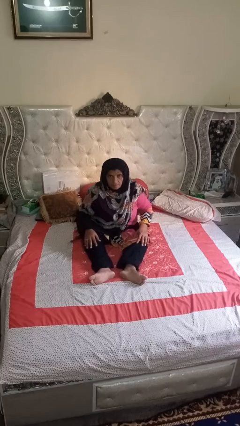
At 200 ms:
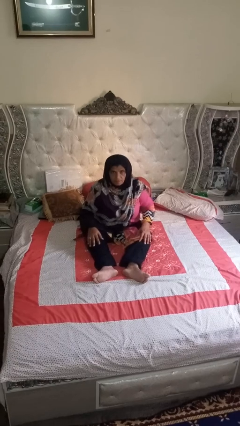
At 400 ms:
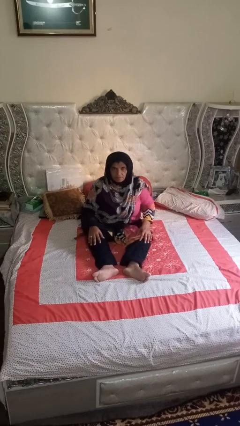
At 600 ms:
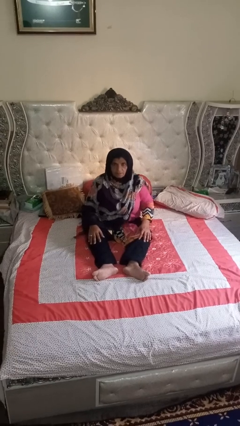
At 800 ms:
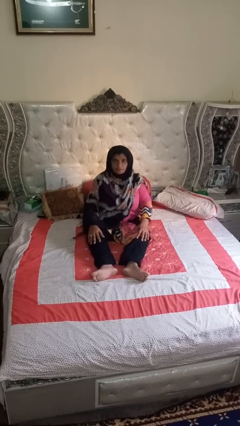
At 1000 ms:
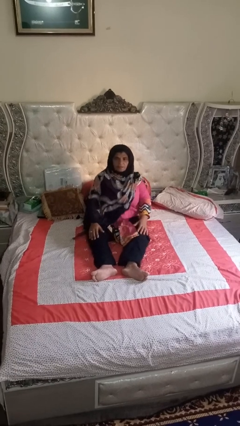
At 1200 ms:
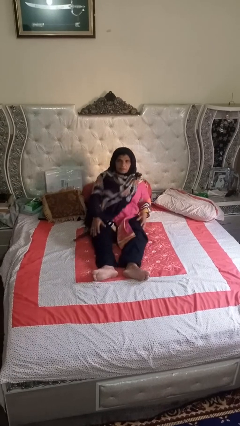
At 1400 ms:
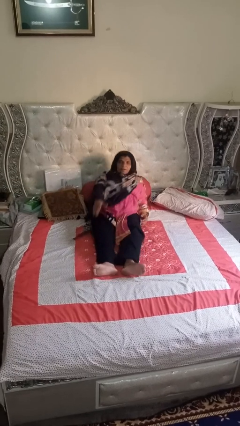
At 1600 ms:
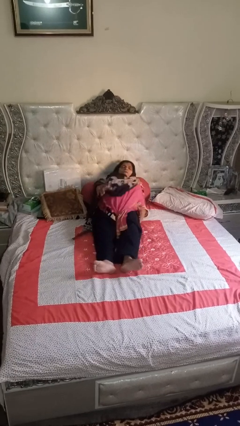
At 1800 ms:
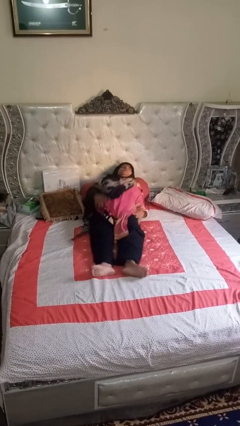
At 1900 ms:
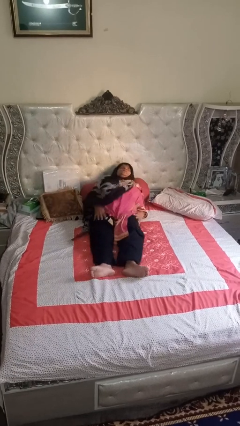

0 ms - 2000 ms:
person lies down on bed

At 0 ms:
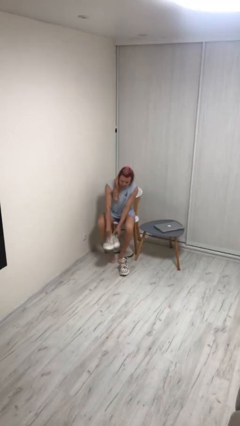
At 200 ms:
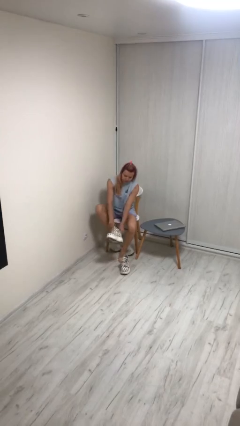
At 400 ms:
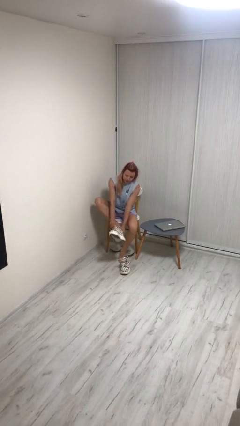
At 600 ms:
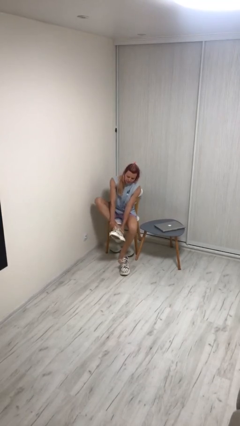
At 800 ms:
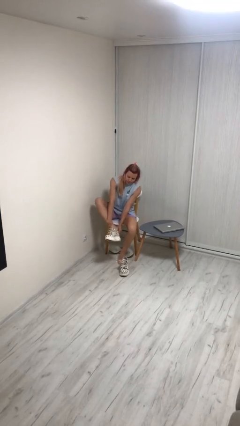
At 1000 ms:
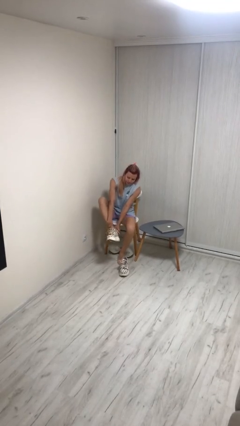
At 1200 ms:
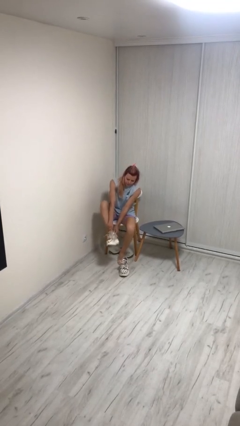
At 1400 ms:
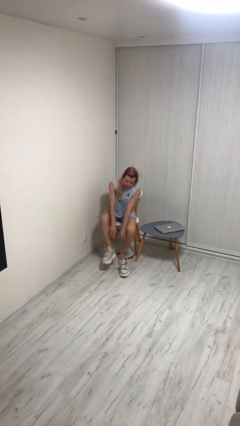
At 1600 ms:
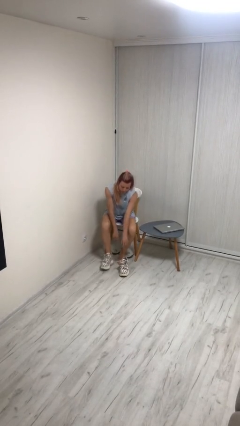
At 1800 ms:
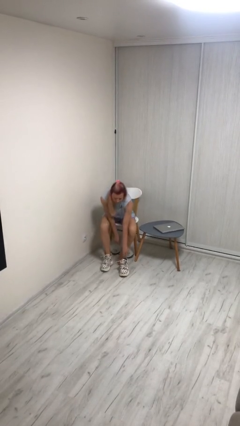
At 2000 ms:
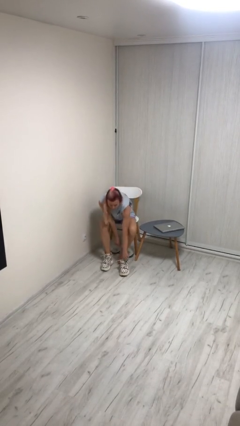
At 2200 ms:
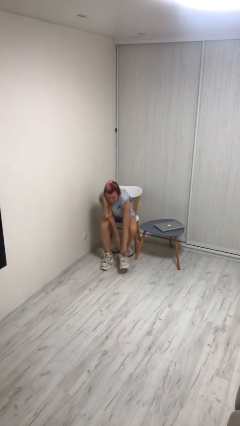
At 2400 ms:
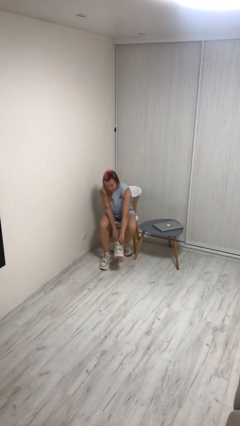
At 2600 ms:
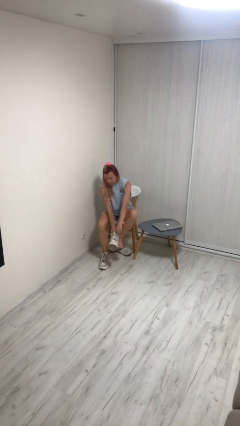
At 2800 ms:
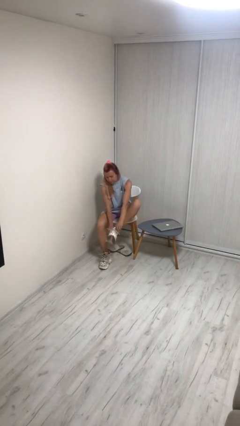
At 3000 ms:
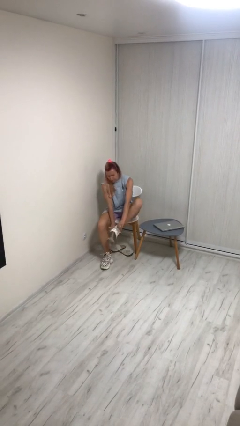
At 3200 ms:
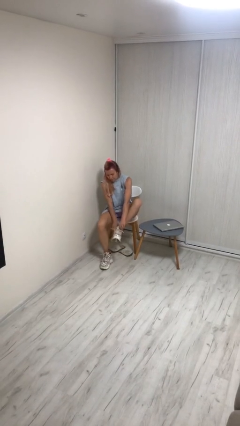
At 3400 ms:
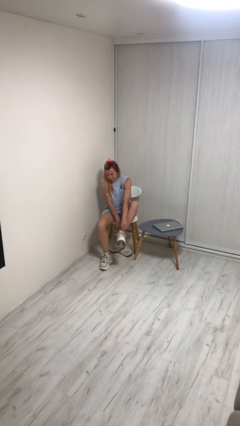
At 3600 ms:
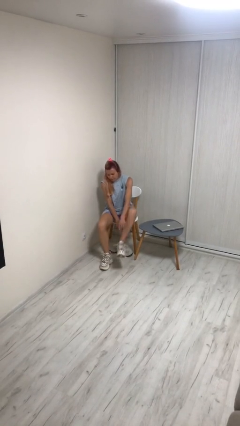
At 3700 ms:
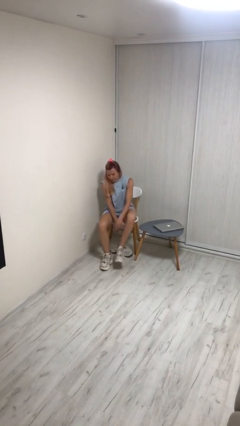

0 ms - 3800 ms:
person puts on boots

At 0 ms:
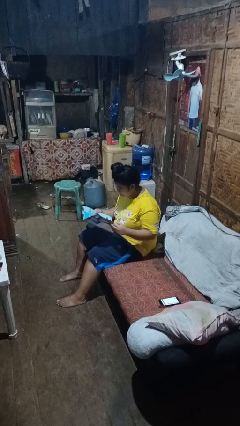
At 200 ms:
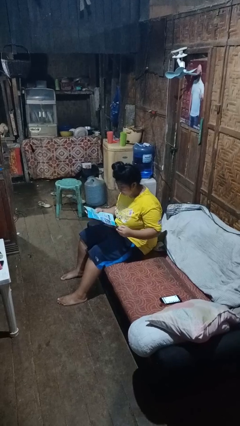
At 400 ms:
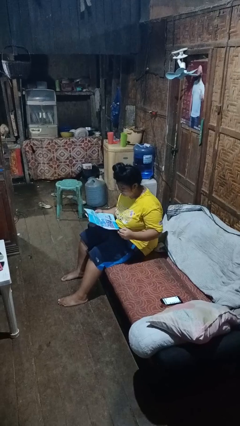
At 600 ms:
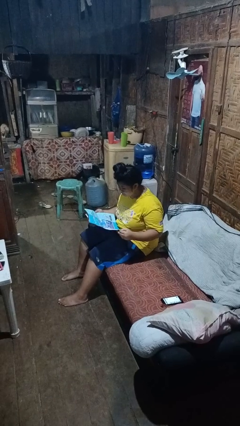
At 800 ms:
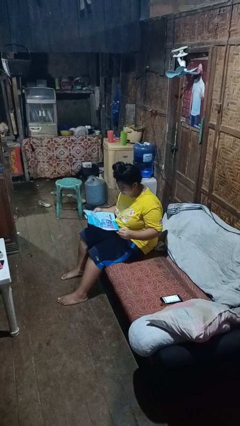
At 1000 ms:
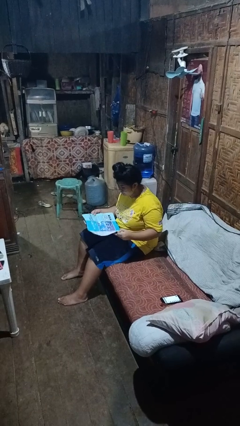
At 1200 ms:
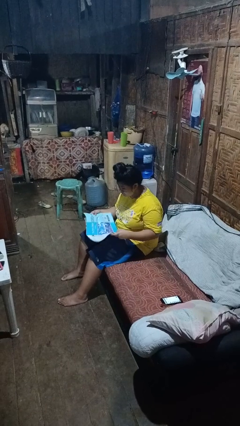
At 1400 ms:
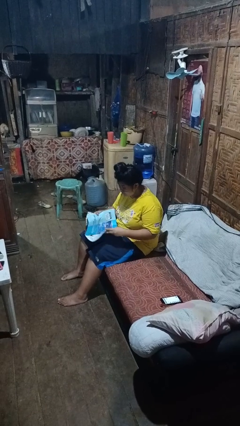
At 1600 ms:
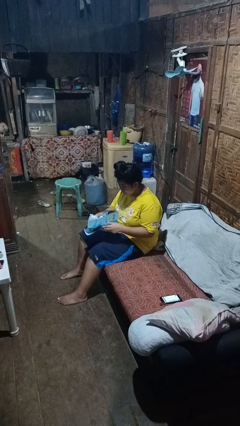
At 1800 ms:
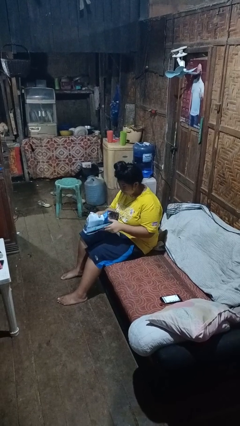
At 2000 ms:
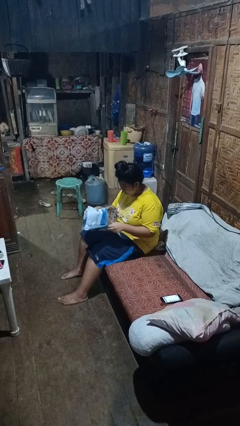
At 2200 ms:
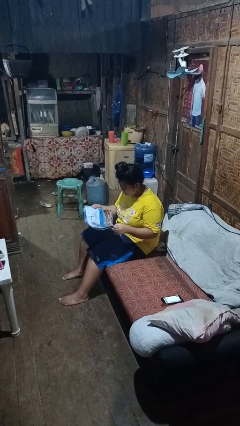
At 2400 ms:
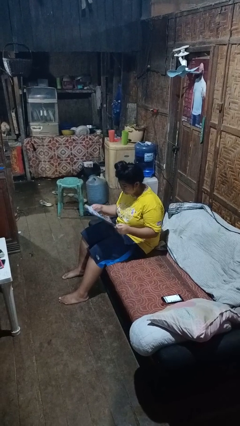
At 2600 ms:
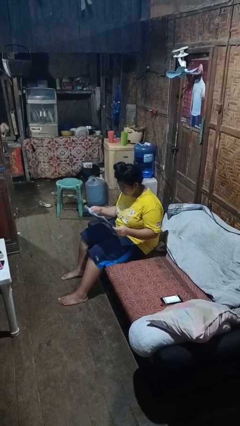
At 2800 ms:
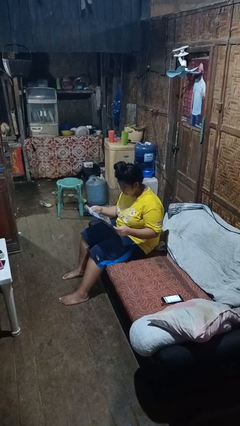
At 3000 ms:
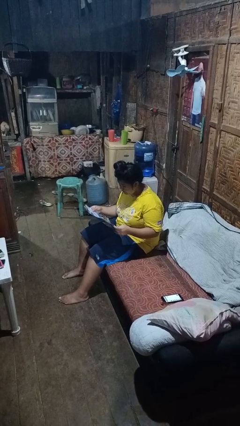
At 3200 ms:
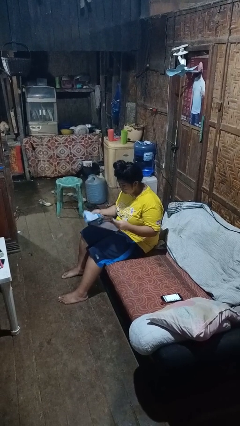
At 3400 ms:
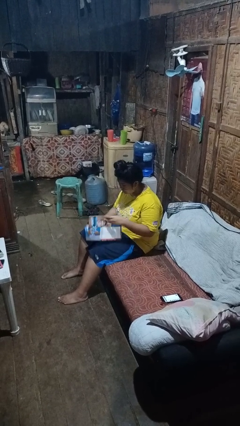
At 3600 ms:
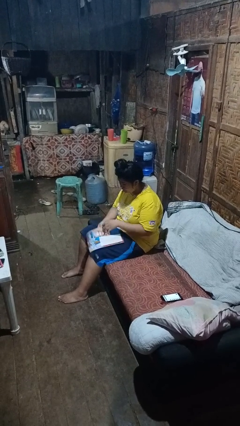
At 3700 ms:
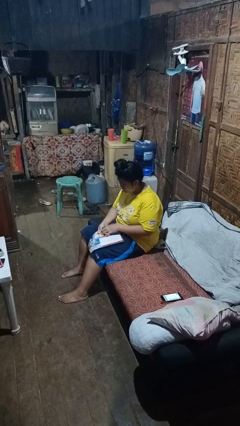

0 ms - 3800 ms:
person reads magazine

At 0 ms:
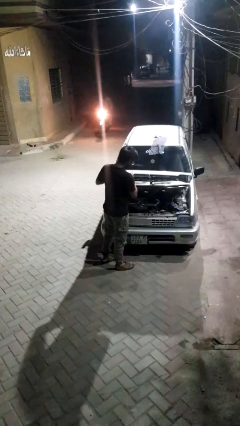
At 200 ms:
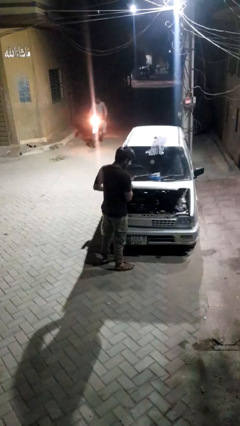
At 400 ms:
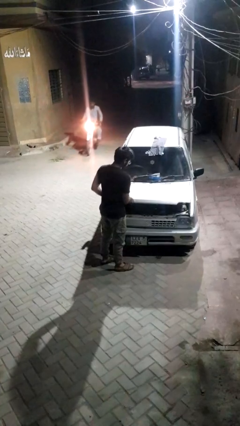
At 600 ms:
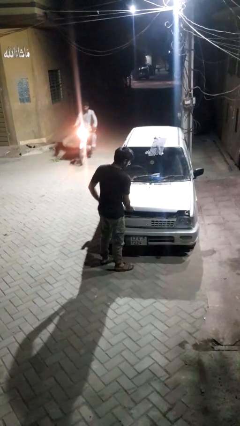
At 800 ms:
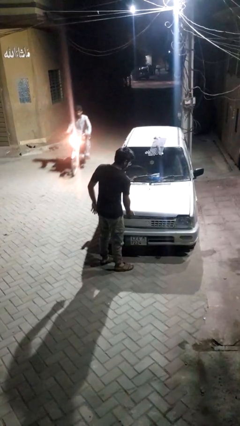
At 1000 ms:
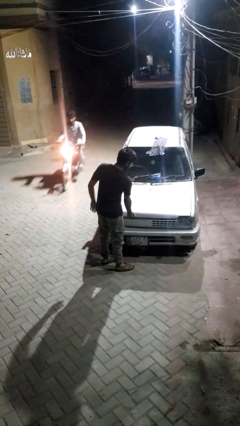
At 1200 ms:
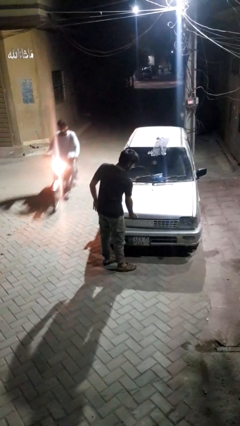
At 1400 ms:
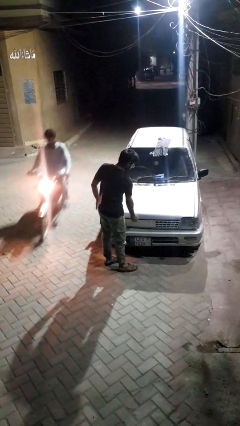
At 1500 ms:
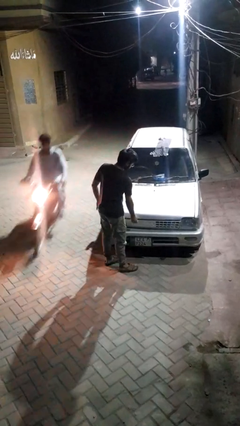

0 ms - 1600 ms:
person closes car hood

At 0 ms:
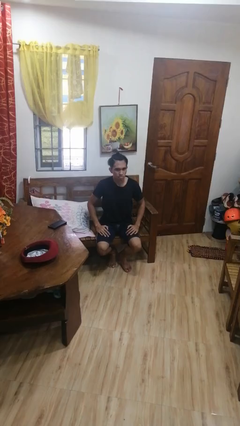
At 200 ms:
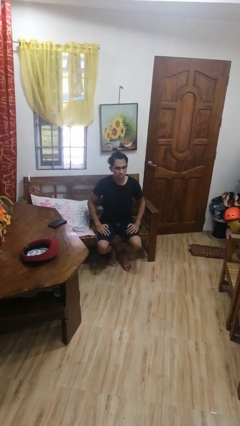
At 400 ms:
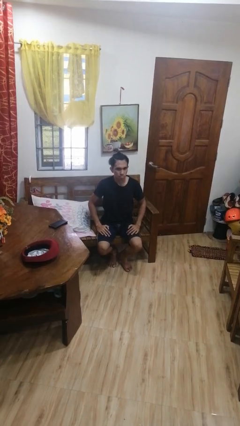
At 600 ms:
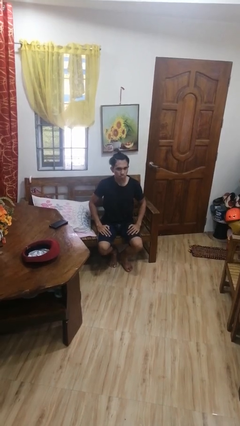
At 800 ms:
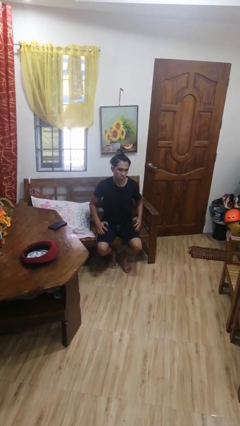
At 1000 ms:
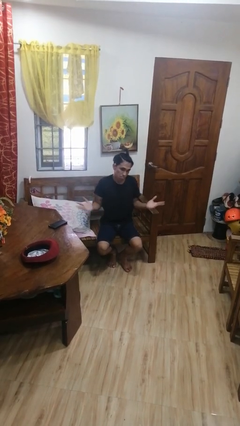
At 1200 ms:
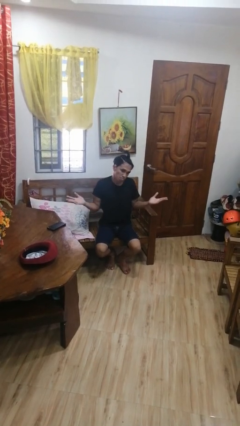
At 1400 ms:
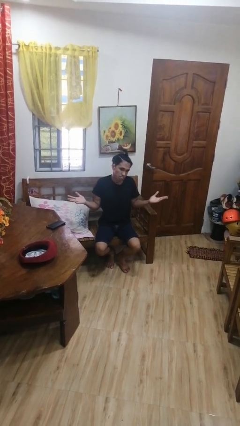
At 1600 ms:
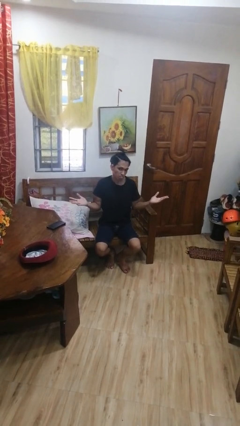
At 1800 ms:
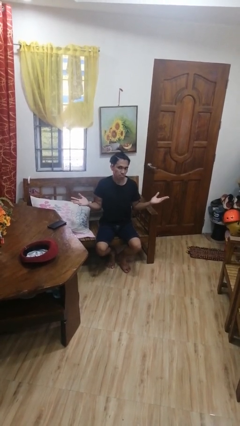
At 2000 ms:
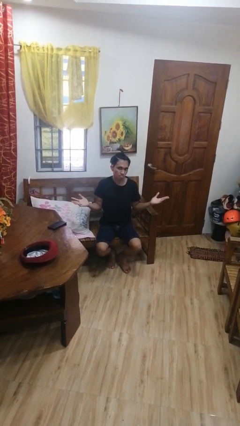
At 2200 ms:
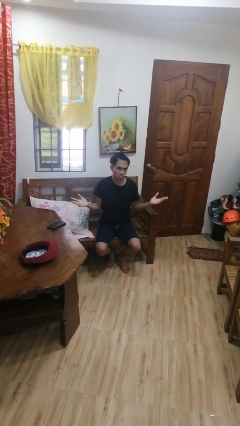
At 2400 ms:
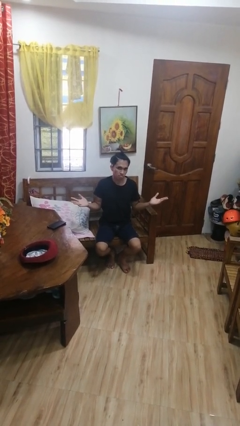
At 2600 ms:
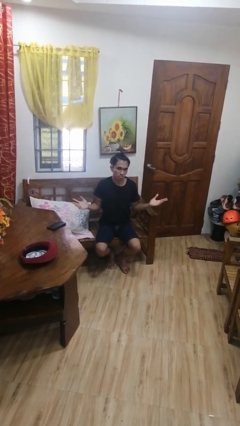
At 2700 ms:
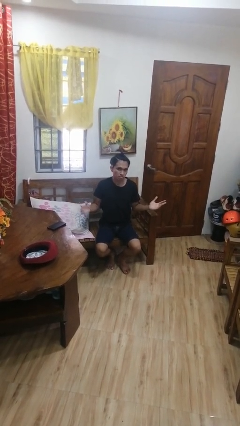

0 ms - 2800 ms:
person shrugs

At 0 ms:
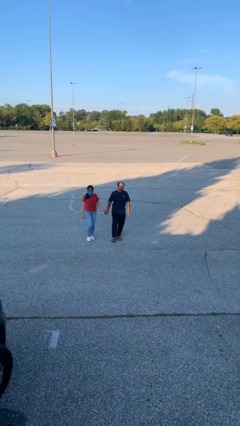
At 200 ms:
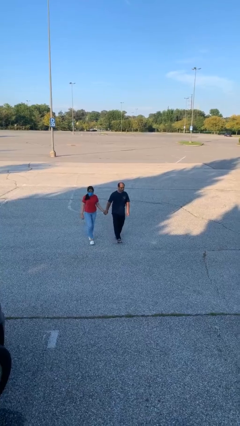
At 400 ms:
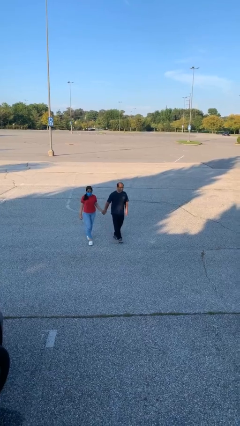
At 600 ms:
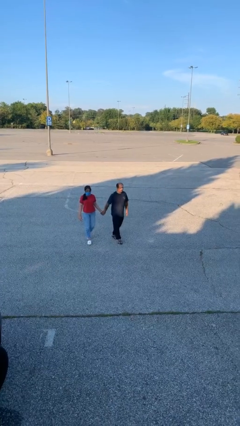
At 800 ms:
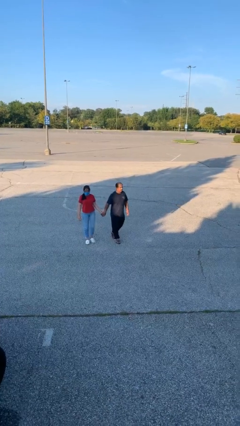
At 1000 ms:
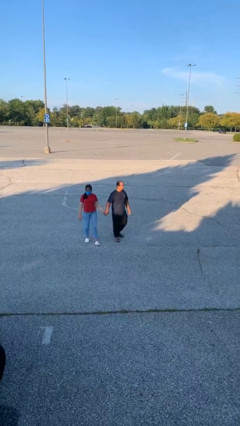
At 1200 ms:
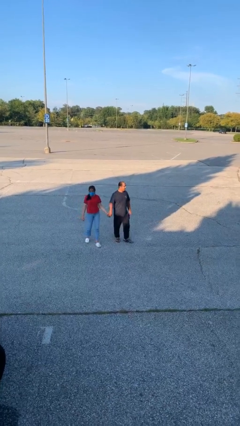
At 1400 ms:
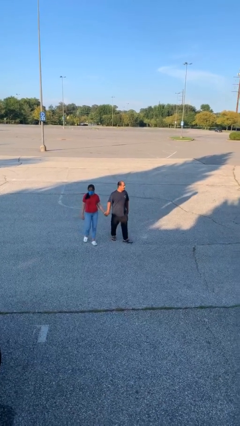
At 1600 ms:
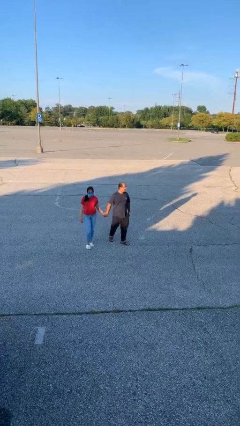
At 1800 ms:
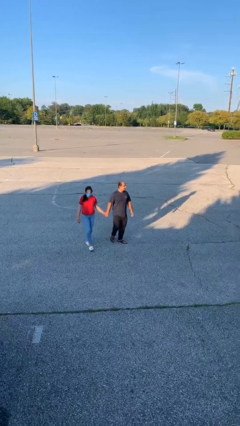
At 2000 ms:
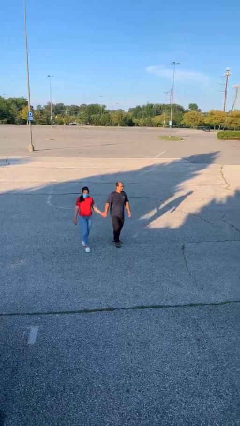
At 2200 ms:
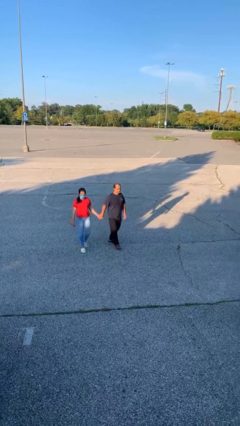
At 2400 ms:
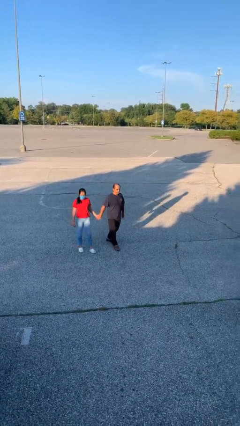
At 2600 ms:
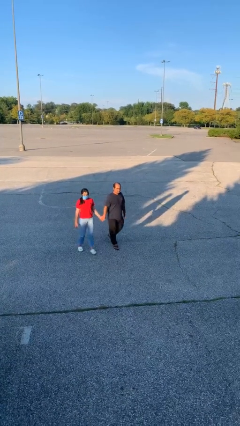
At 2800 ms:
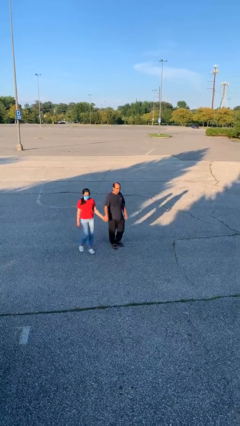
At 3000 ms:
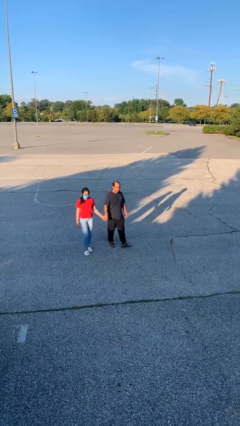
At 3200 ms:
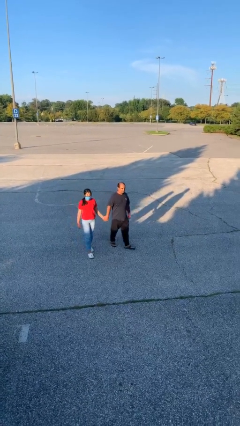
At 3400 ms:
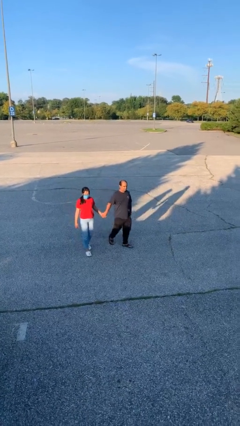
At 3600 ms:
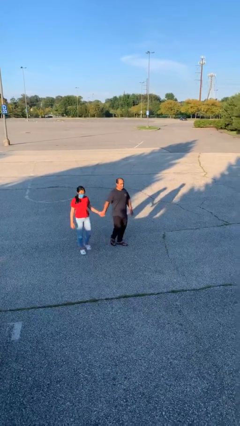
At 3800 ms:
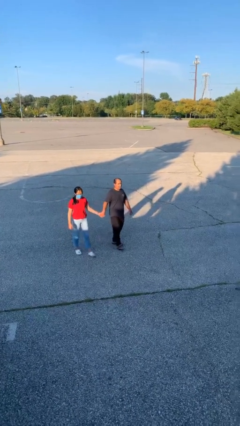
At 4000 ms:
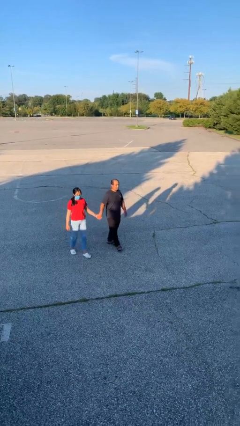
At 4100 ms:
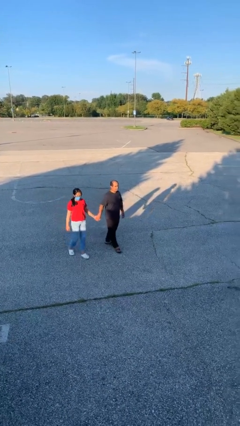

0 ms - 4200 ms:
person holds hand
